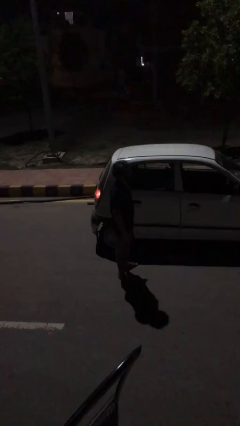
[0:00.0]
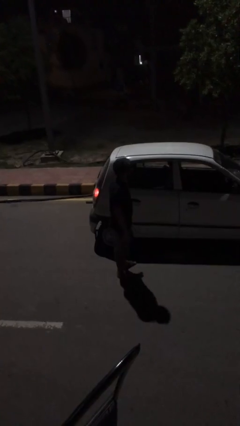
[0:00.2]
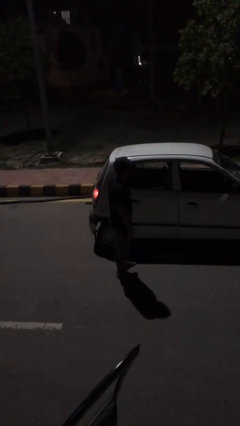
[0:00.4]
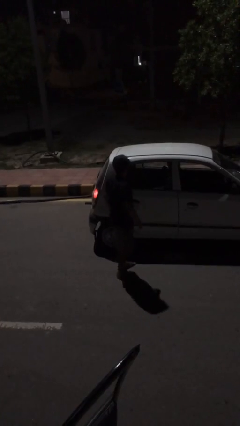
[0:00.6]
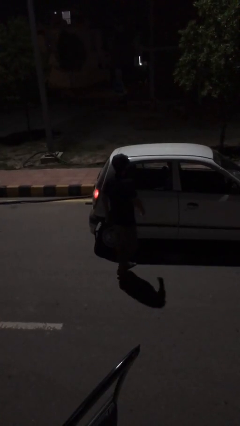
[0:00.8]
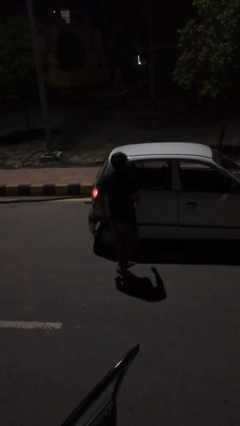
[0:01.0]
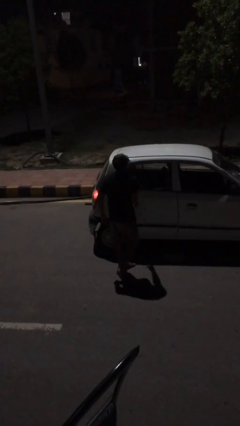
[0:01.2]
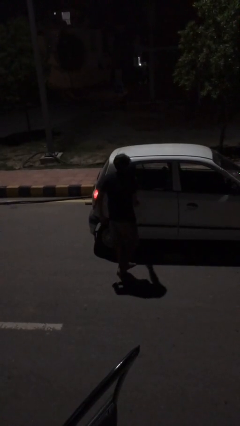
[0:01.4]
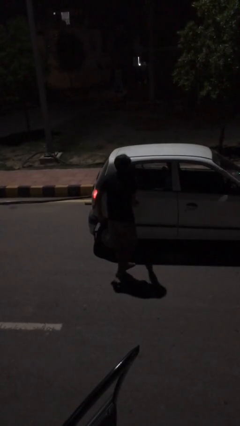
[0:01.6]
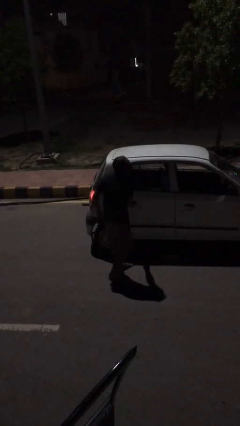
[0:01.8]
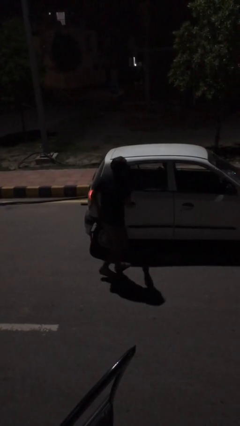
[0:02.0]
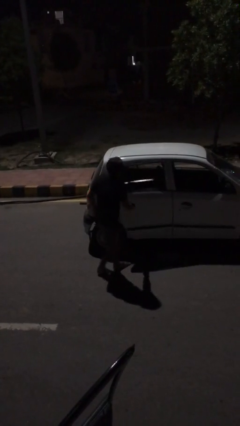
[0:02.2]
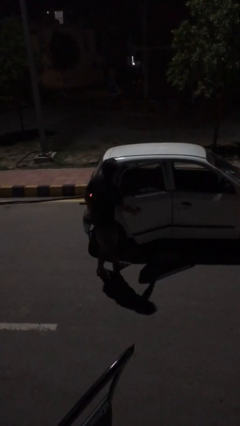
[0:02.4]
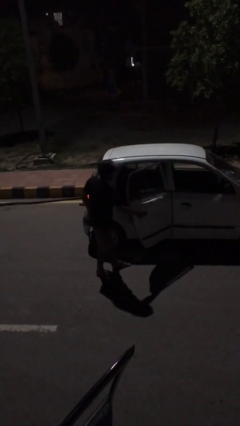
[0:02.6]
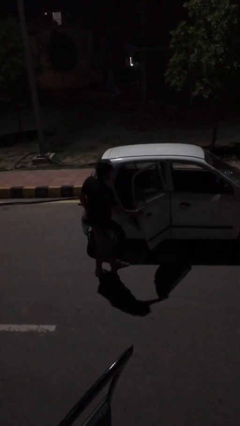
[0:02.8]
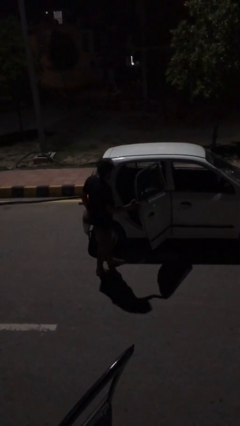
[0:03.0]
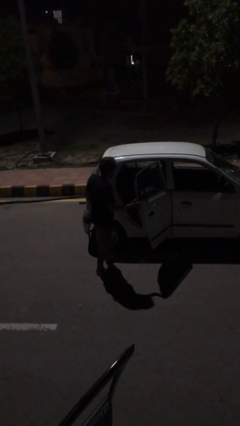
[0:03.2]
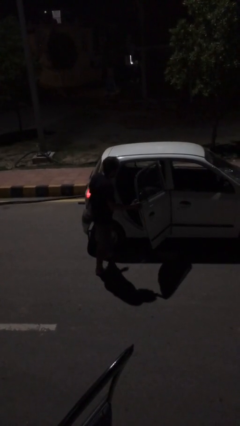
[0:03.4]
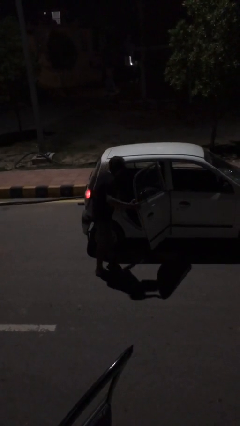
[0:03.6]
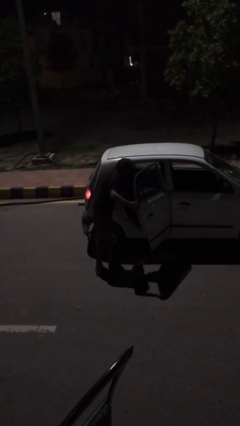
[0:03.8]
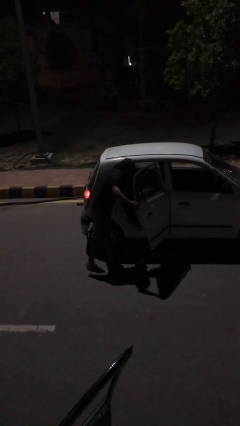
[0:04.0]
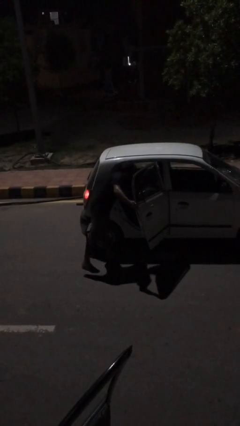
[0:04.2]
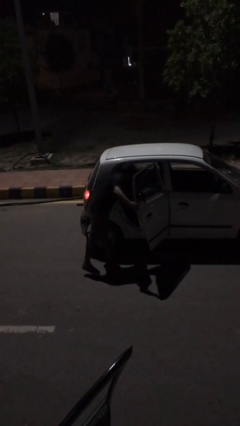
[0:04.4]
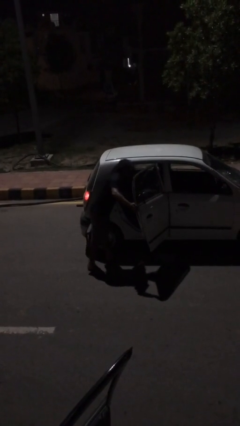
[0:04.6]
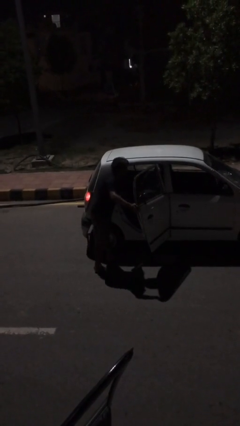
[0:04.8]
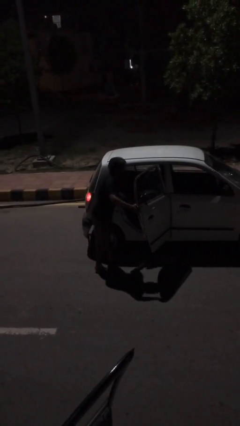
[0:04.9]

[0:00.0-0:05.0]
person opens car door

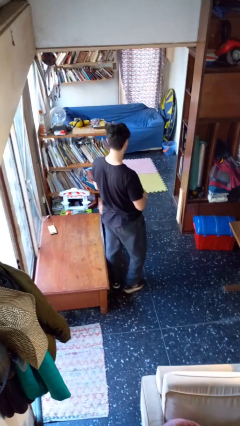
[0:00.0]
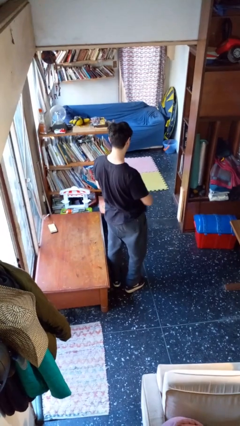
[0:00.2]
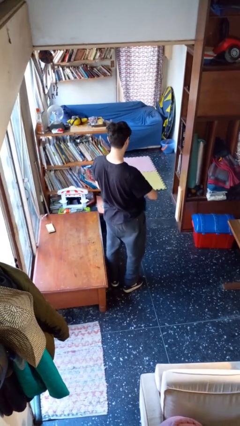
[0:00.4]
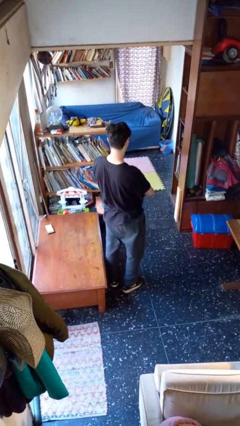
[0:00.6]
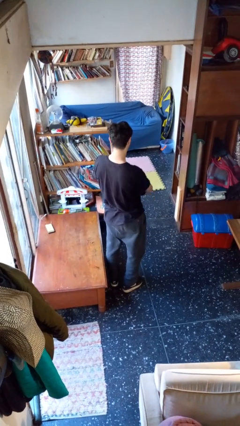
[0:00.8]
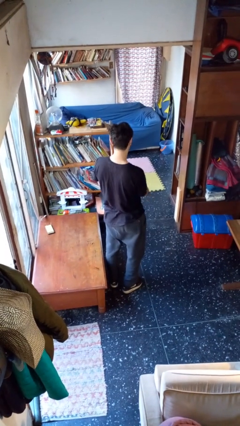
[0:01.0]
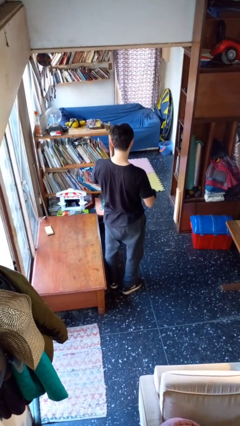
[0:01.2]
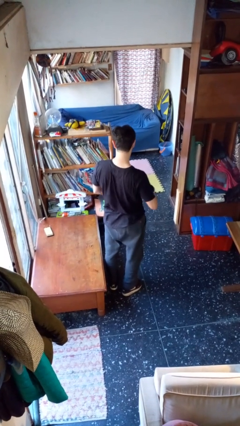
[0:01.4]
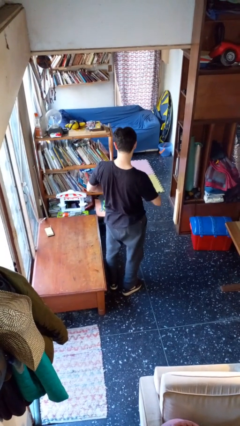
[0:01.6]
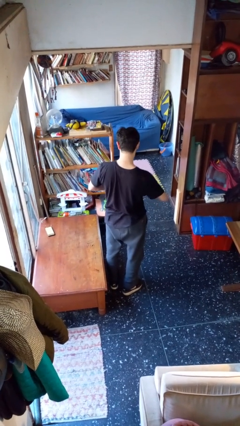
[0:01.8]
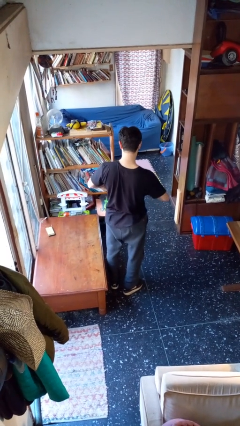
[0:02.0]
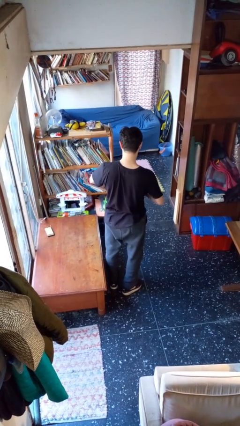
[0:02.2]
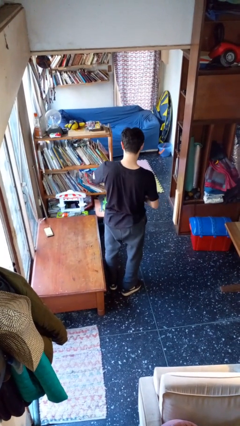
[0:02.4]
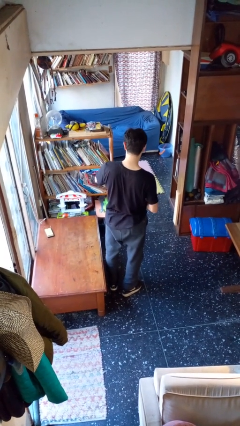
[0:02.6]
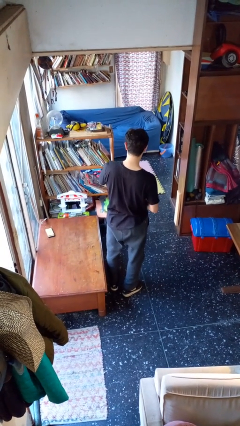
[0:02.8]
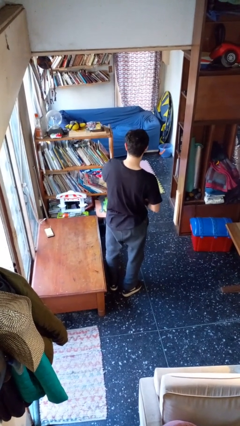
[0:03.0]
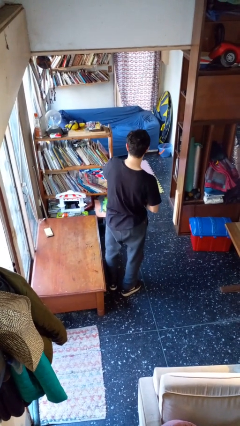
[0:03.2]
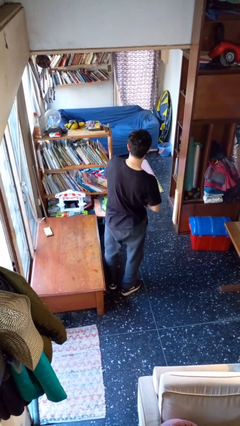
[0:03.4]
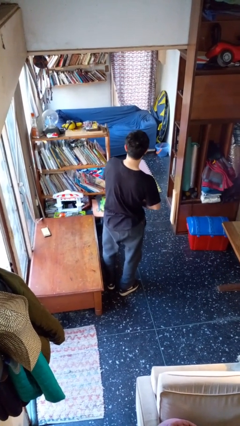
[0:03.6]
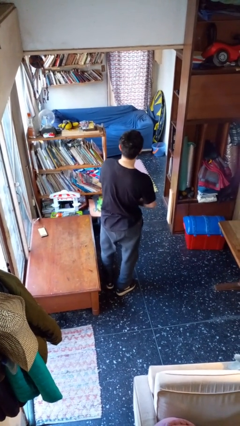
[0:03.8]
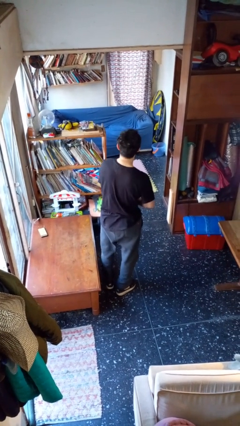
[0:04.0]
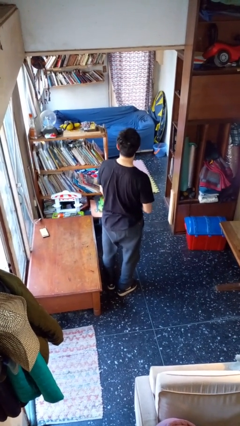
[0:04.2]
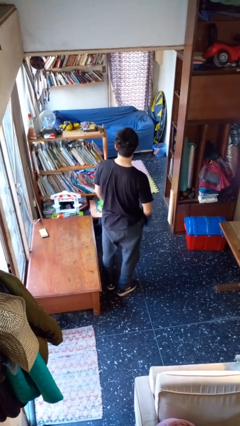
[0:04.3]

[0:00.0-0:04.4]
person puts on gloves

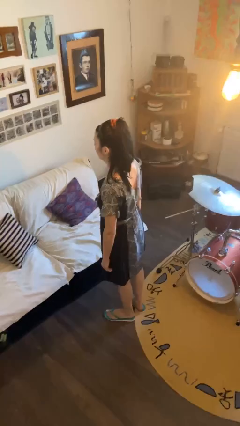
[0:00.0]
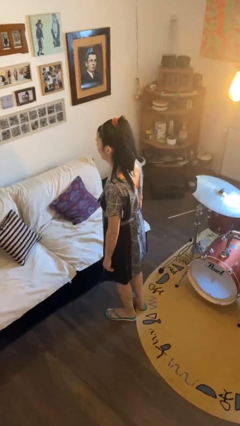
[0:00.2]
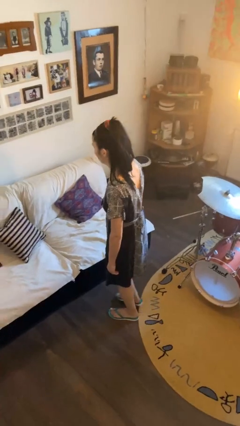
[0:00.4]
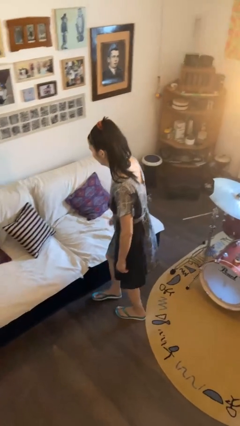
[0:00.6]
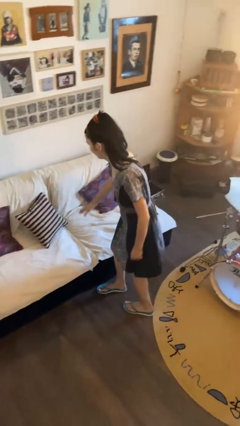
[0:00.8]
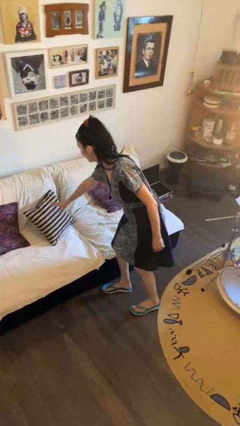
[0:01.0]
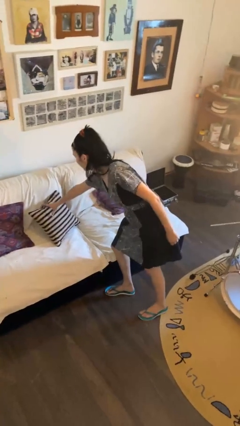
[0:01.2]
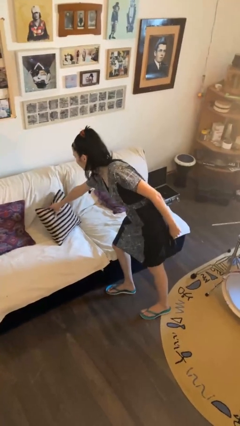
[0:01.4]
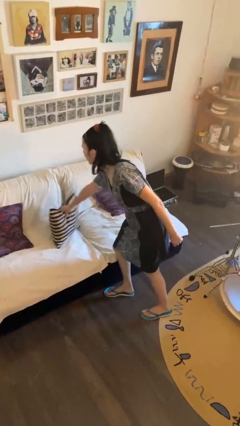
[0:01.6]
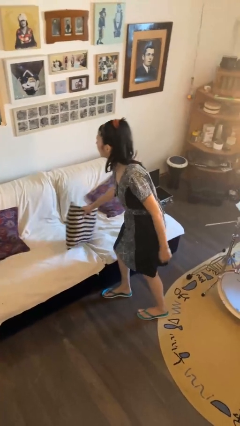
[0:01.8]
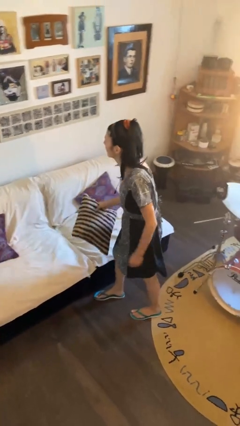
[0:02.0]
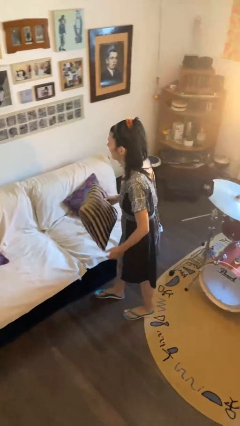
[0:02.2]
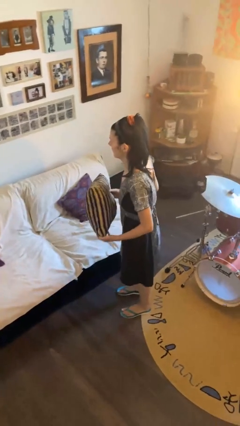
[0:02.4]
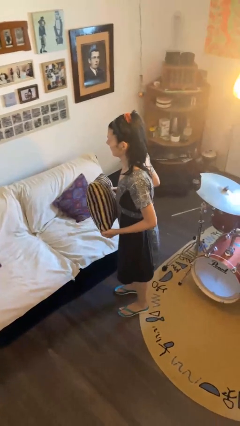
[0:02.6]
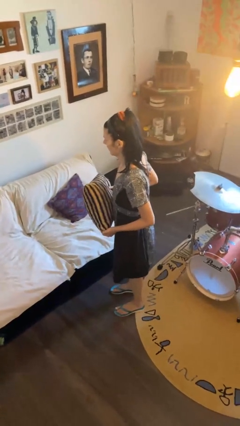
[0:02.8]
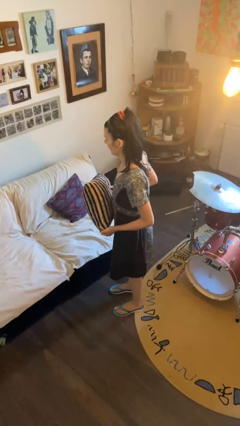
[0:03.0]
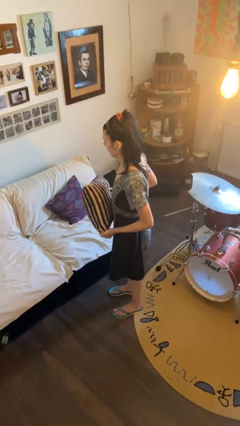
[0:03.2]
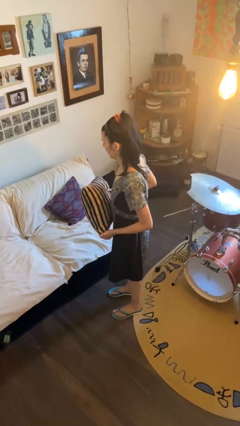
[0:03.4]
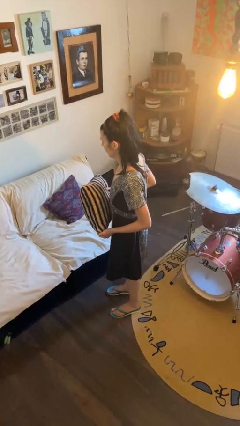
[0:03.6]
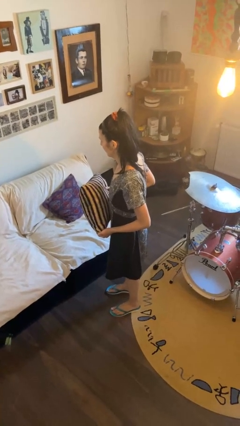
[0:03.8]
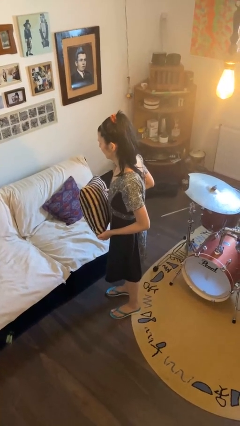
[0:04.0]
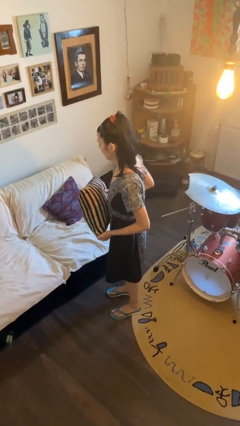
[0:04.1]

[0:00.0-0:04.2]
person picks up object from couch

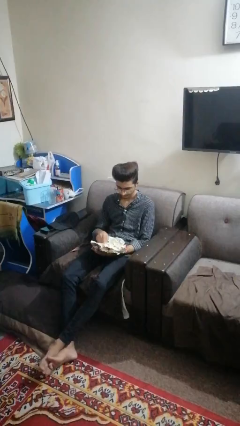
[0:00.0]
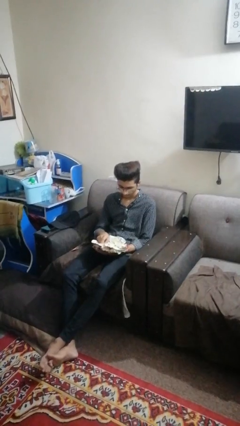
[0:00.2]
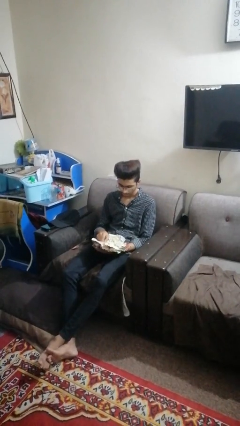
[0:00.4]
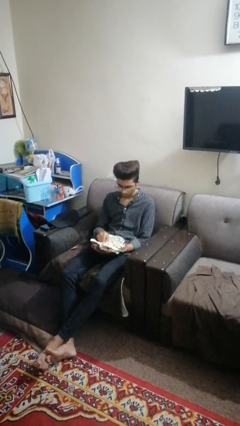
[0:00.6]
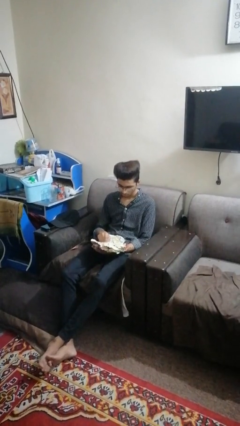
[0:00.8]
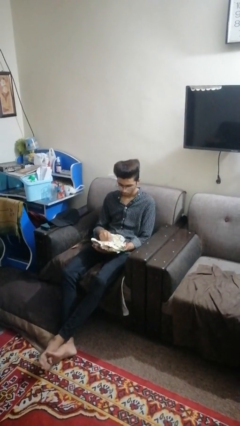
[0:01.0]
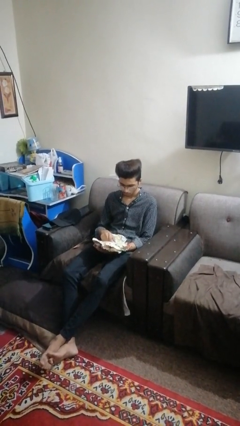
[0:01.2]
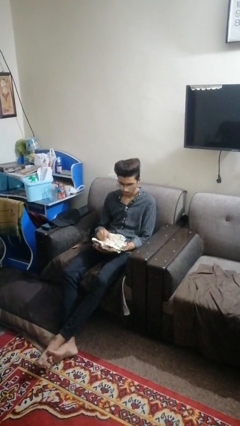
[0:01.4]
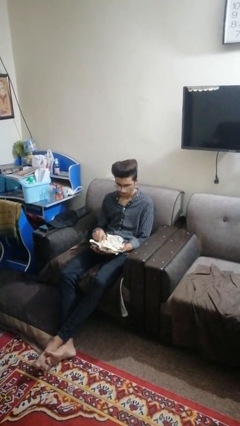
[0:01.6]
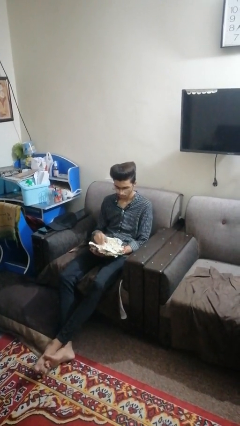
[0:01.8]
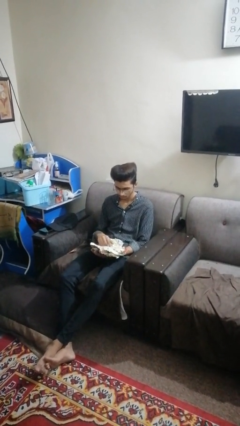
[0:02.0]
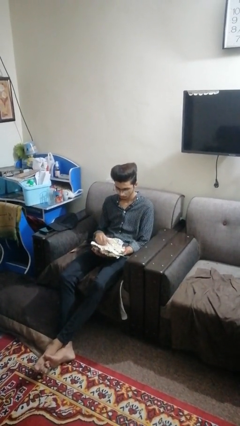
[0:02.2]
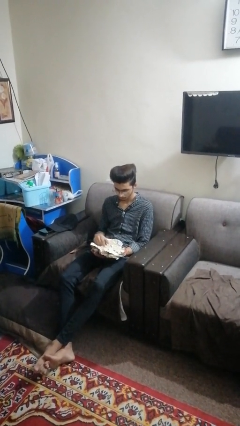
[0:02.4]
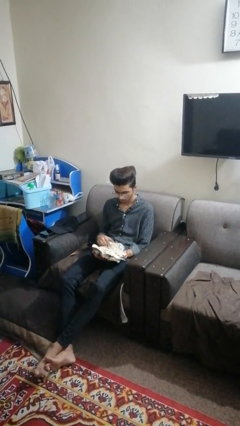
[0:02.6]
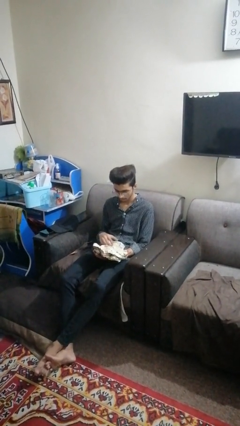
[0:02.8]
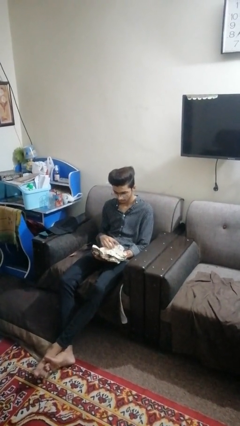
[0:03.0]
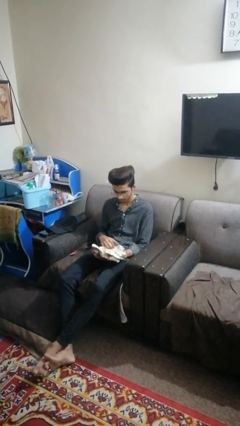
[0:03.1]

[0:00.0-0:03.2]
person reads newspaper

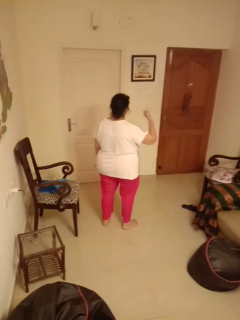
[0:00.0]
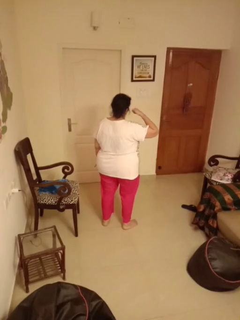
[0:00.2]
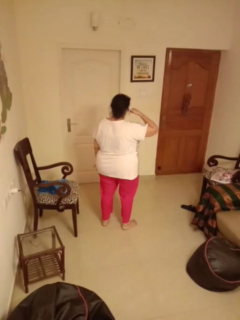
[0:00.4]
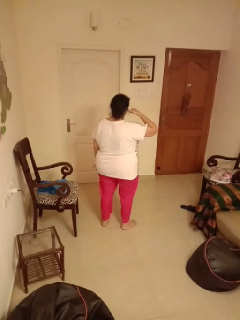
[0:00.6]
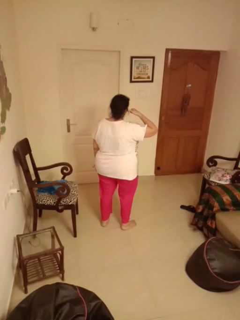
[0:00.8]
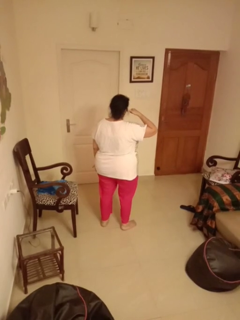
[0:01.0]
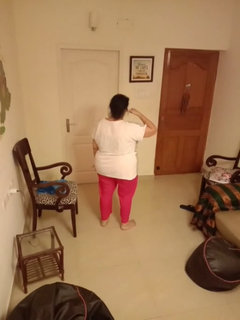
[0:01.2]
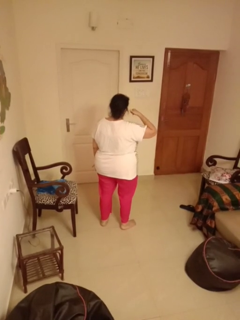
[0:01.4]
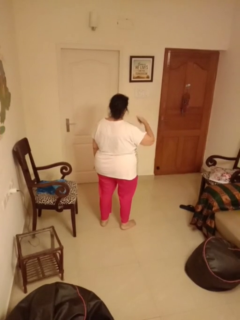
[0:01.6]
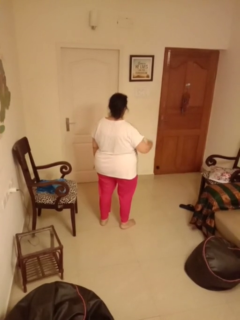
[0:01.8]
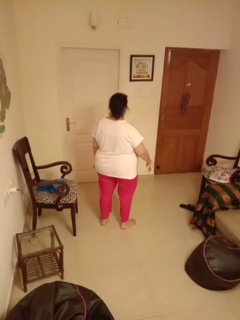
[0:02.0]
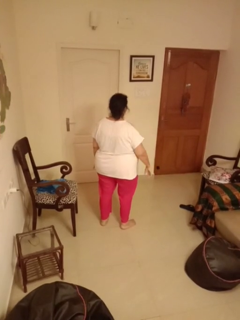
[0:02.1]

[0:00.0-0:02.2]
person gestures call me
